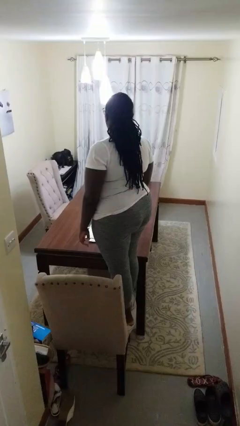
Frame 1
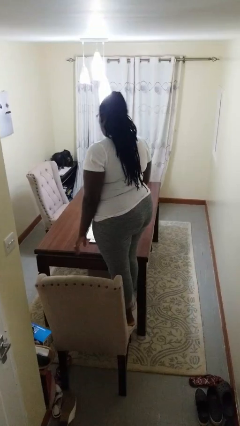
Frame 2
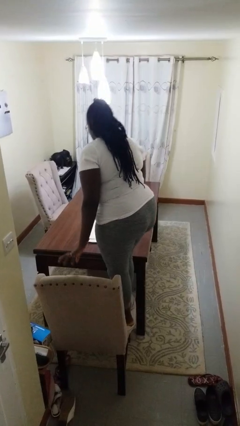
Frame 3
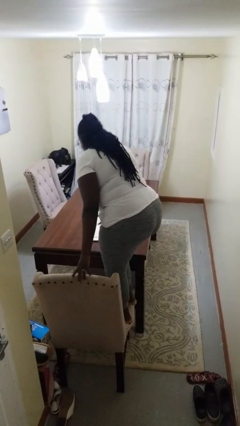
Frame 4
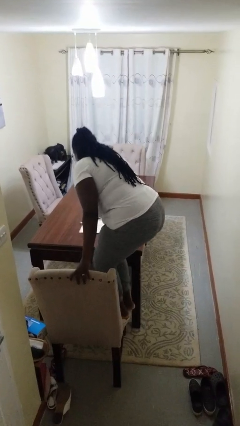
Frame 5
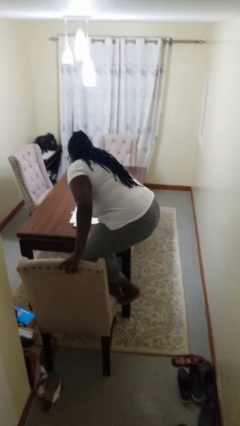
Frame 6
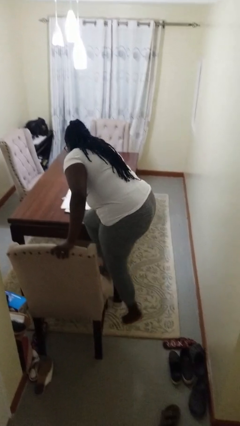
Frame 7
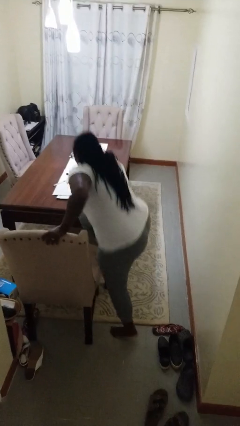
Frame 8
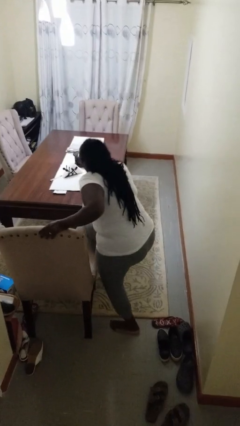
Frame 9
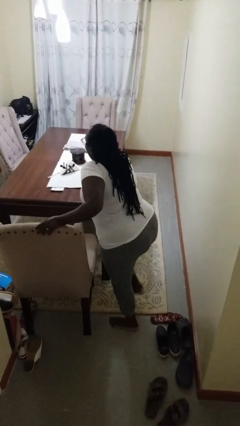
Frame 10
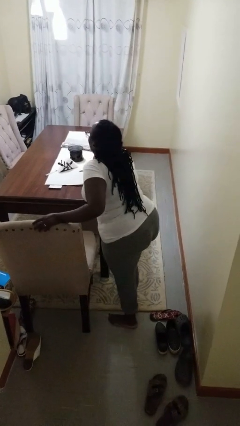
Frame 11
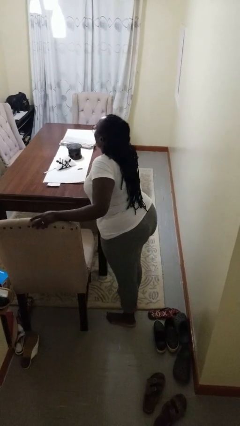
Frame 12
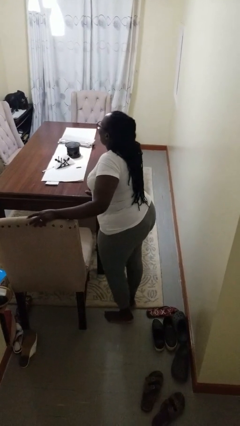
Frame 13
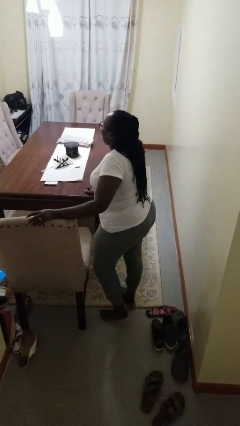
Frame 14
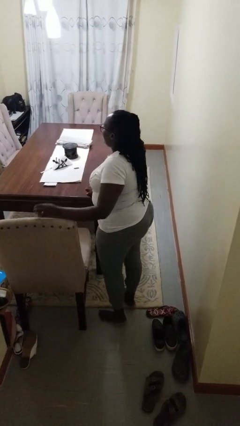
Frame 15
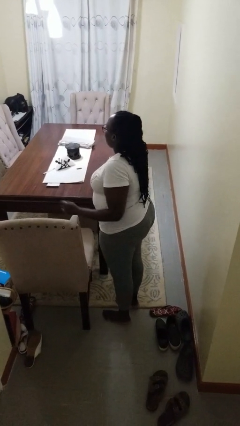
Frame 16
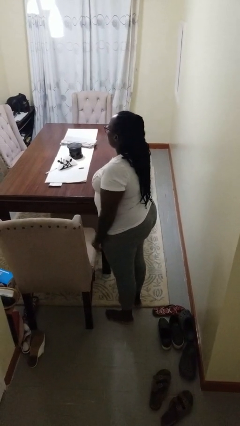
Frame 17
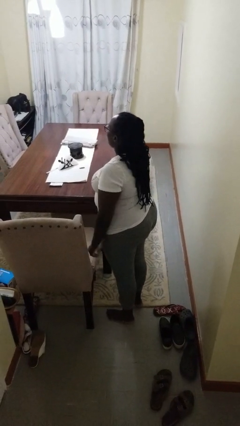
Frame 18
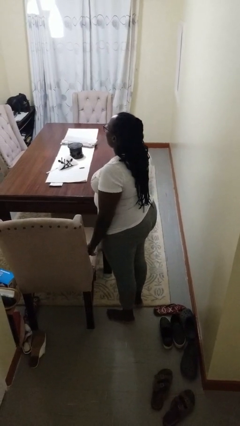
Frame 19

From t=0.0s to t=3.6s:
person climbs off chair

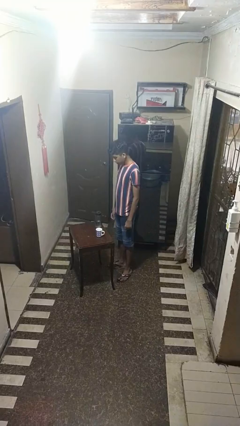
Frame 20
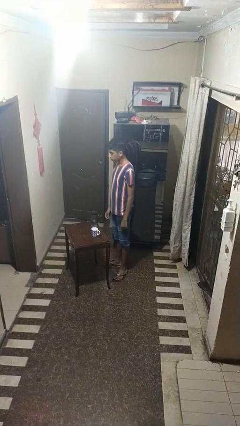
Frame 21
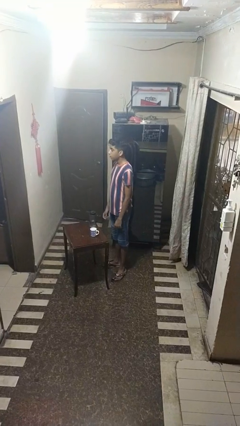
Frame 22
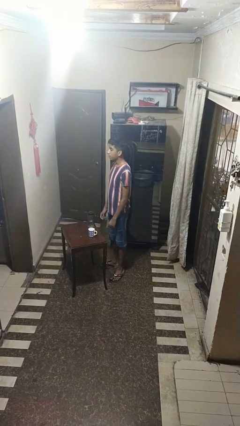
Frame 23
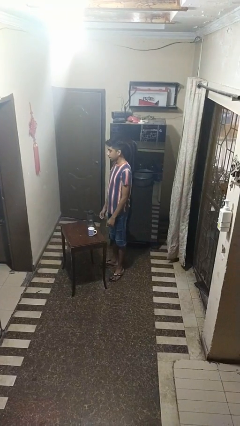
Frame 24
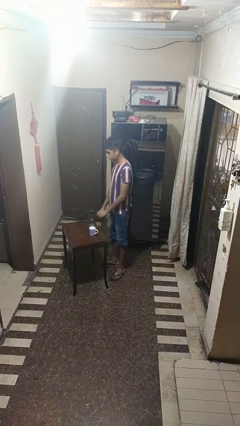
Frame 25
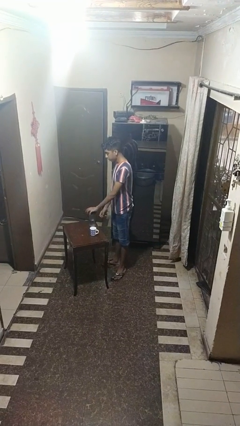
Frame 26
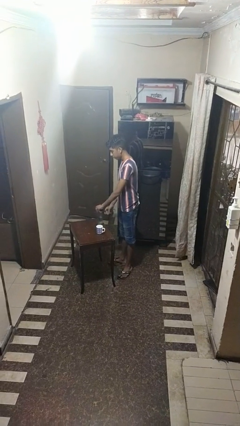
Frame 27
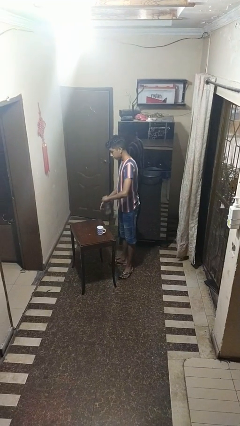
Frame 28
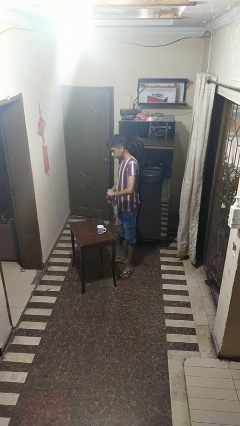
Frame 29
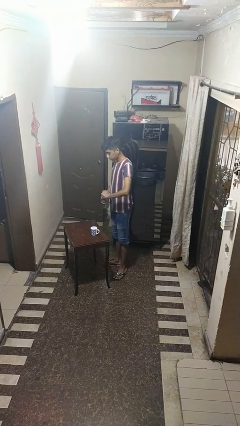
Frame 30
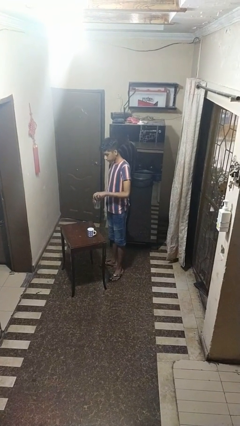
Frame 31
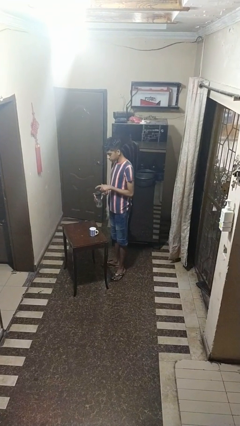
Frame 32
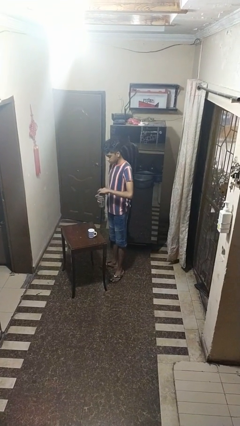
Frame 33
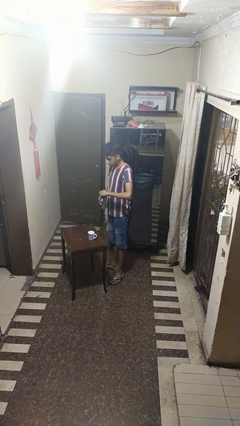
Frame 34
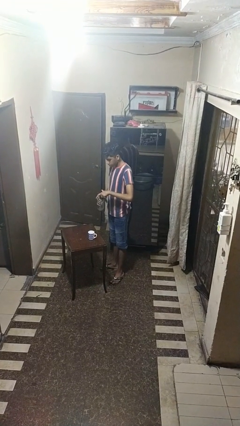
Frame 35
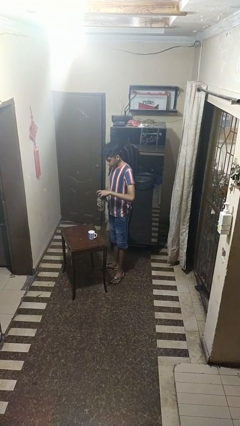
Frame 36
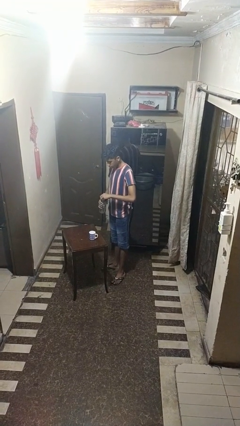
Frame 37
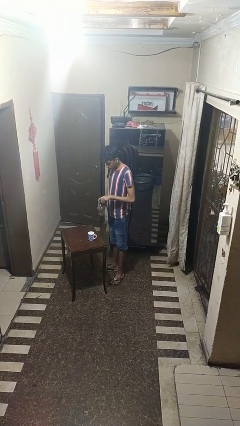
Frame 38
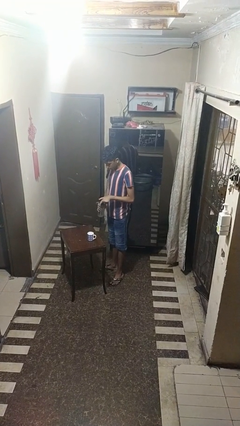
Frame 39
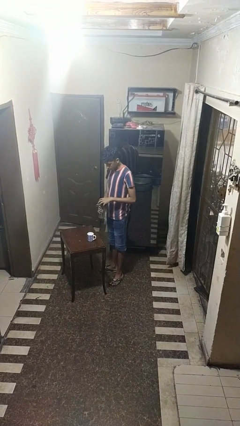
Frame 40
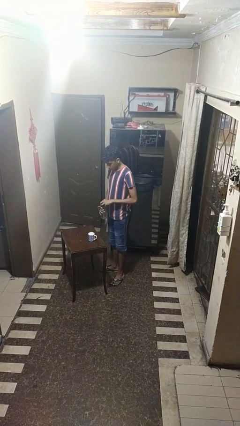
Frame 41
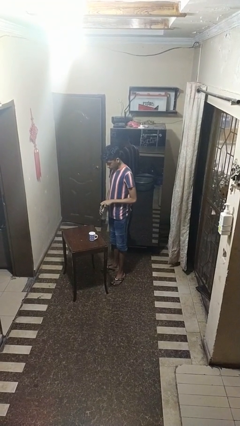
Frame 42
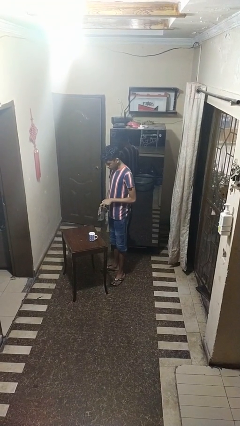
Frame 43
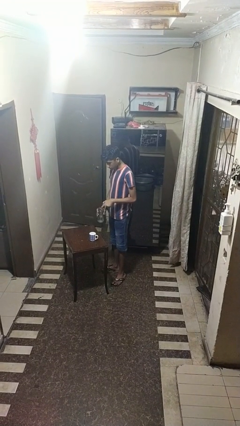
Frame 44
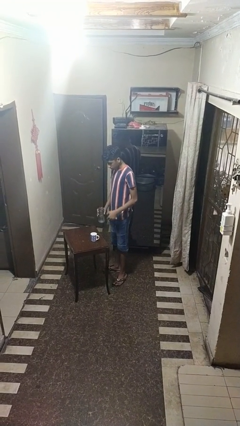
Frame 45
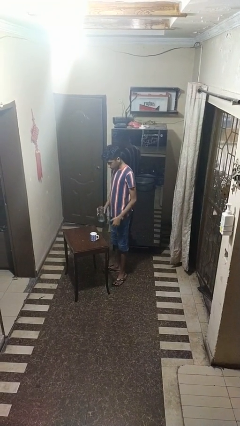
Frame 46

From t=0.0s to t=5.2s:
person unscrews lid from bottle

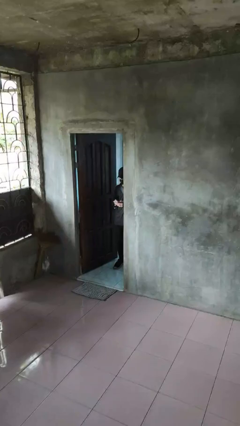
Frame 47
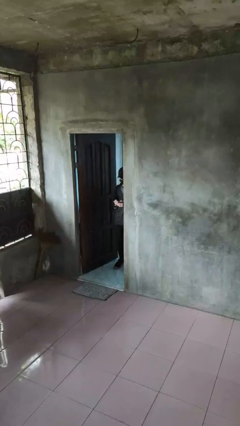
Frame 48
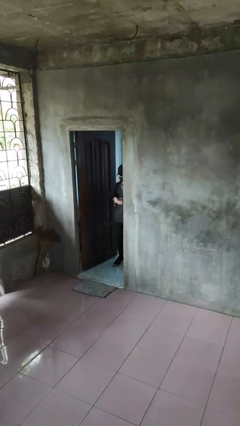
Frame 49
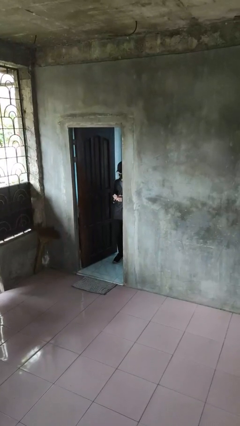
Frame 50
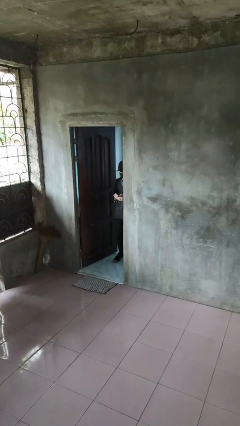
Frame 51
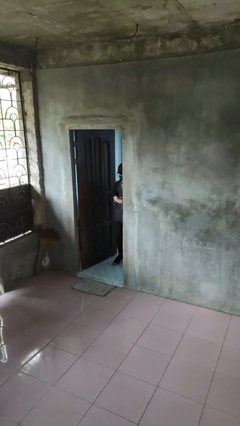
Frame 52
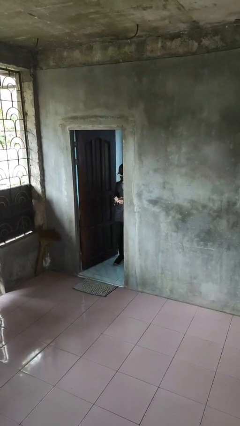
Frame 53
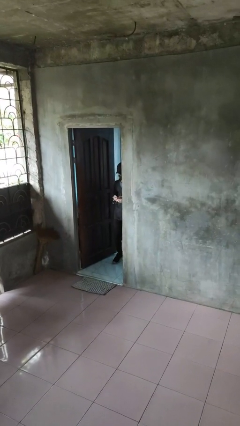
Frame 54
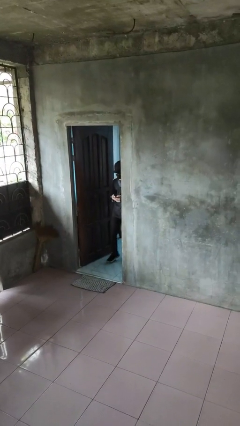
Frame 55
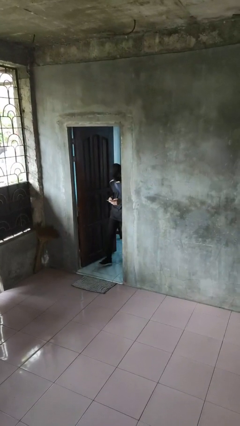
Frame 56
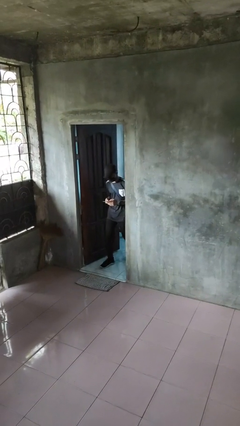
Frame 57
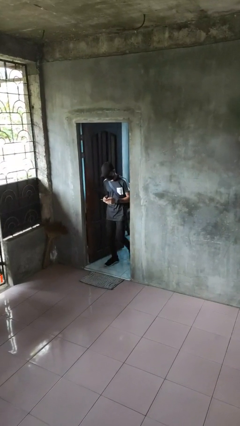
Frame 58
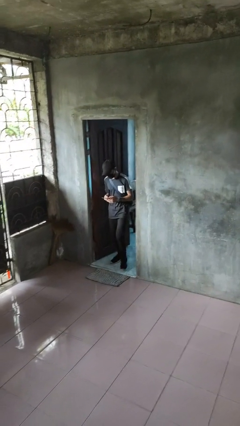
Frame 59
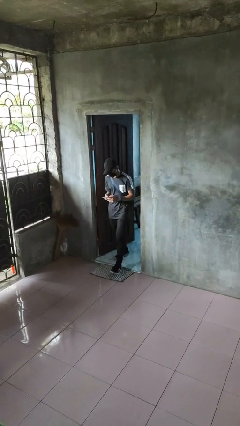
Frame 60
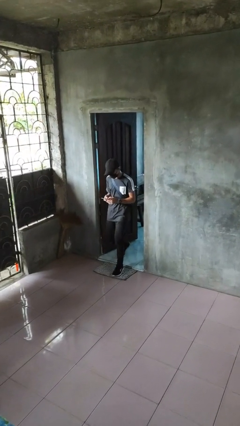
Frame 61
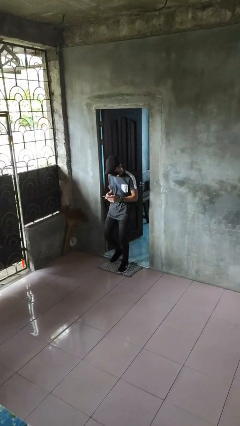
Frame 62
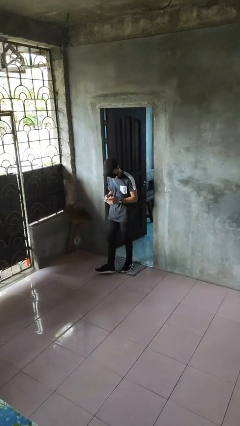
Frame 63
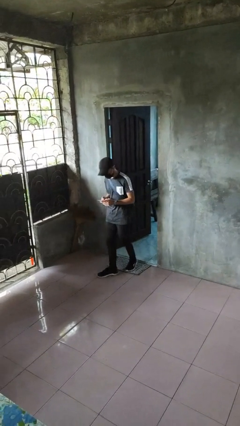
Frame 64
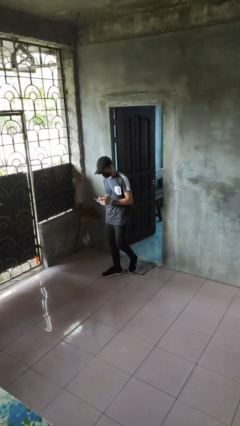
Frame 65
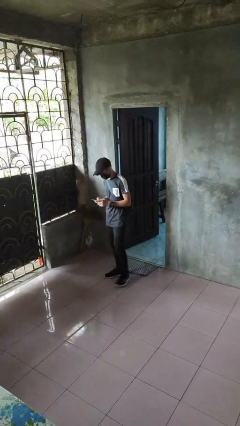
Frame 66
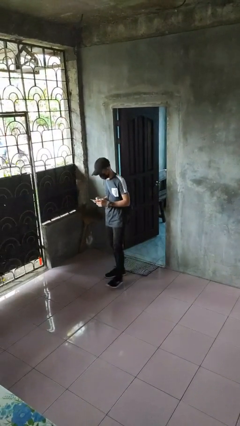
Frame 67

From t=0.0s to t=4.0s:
person enters scene through structure

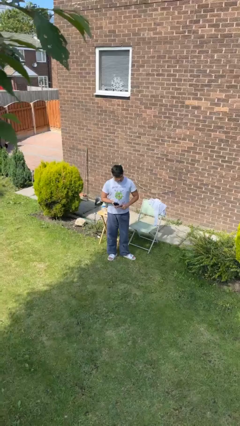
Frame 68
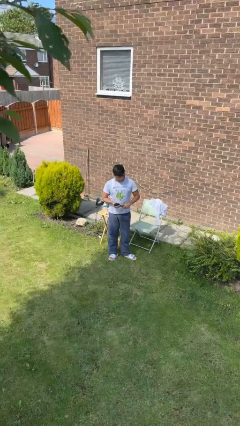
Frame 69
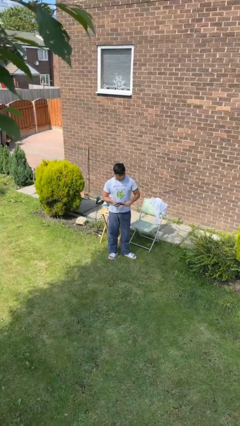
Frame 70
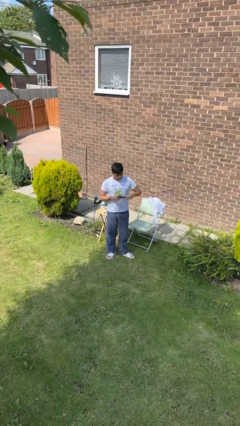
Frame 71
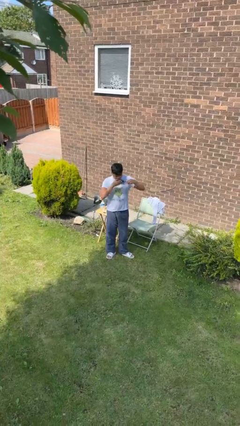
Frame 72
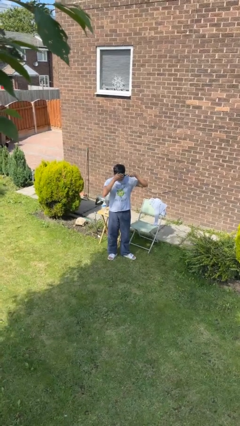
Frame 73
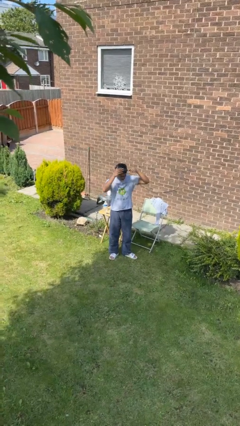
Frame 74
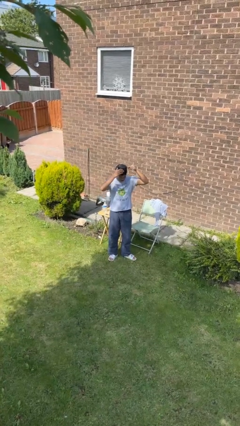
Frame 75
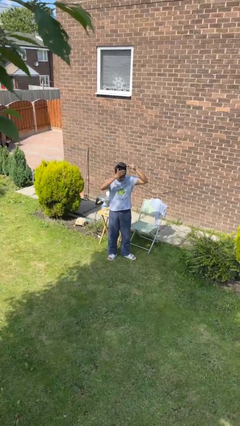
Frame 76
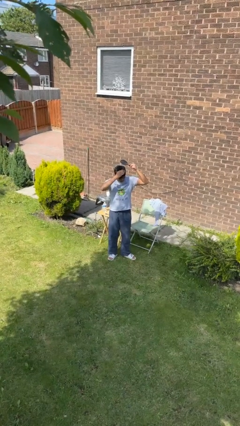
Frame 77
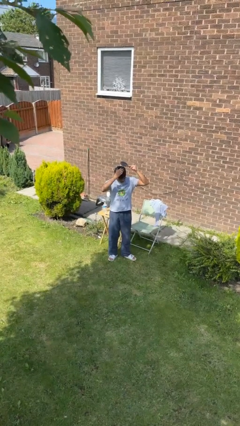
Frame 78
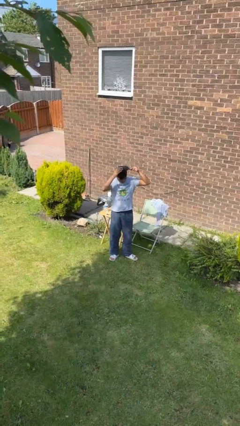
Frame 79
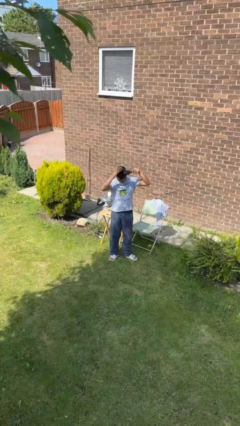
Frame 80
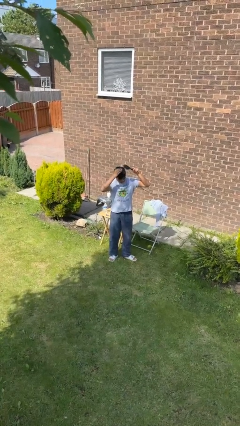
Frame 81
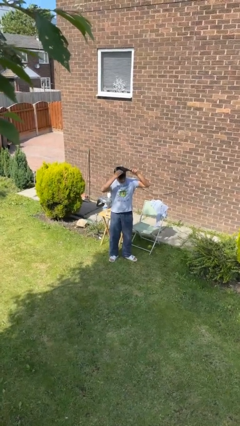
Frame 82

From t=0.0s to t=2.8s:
person brushes hair

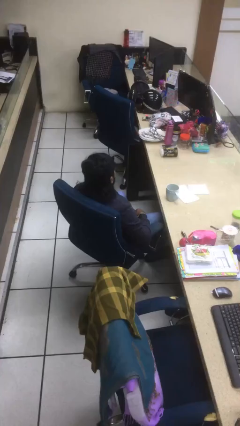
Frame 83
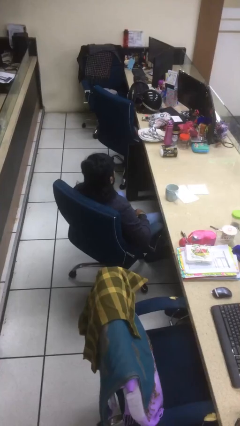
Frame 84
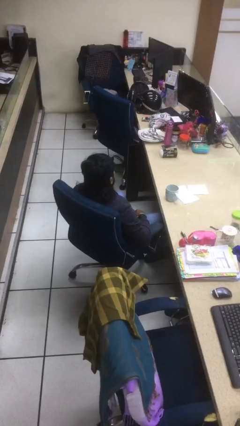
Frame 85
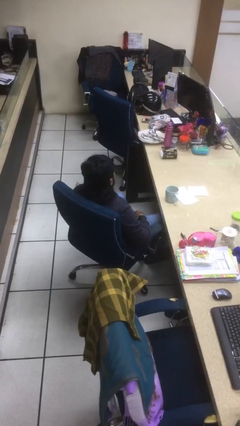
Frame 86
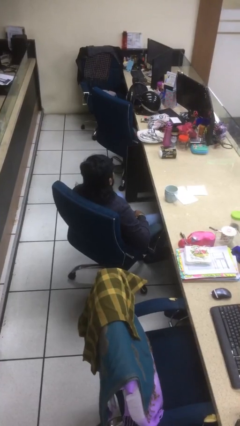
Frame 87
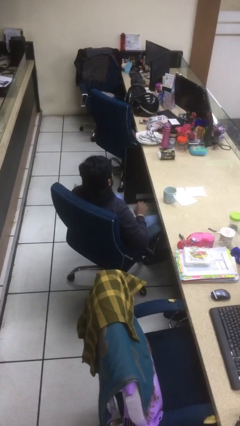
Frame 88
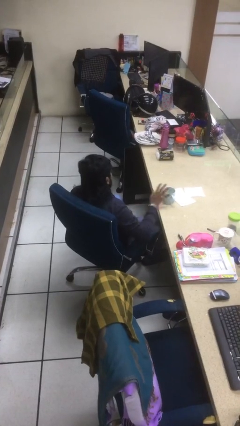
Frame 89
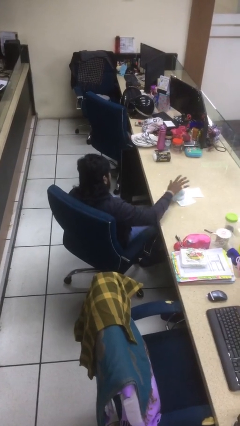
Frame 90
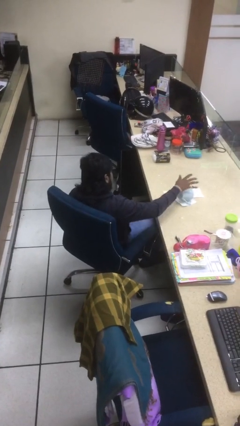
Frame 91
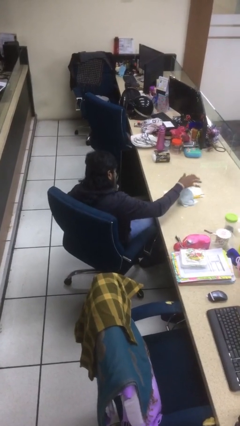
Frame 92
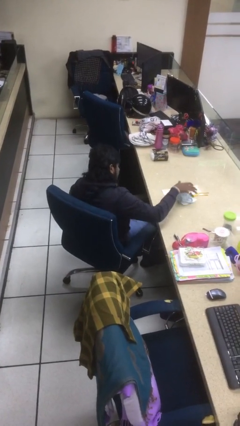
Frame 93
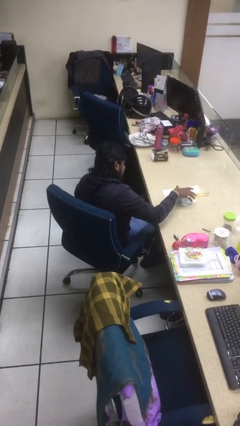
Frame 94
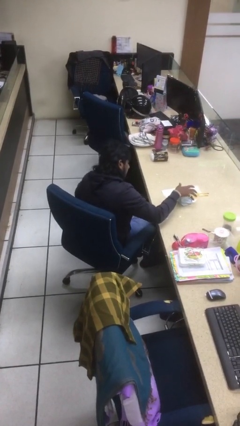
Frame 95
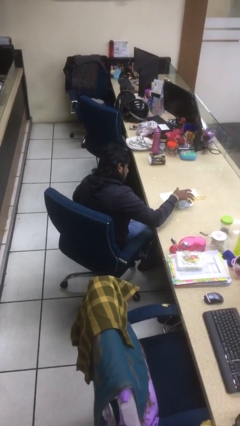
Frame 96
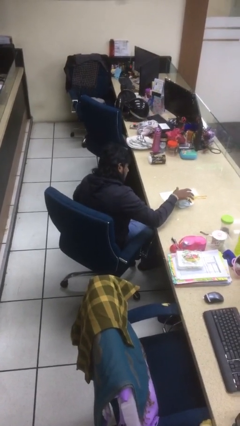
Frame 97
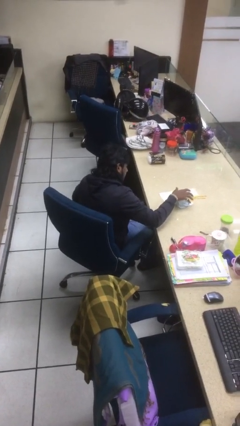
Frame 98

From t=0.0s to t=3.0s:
person spills on table
